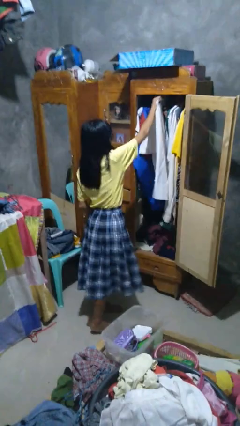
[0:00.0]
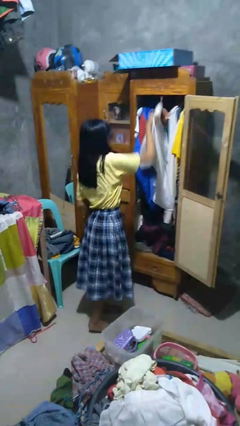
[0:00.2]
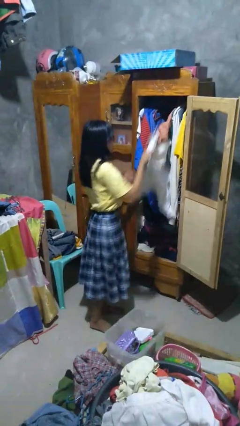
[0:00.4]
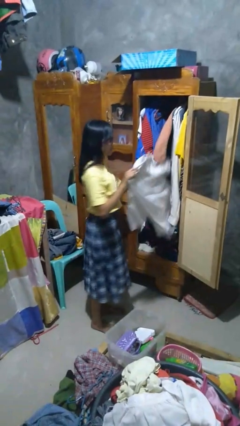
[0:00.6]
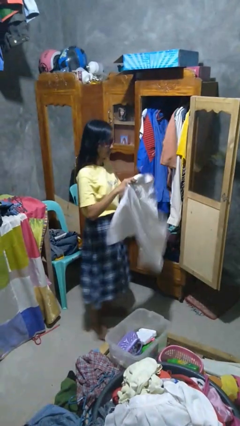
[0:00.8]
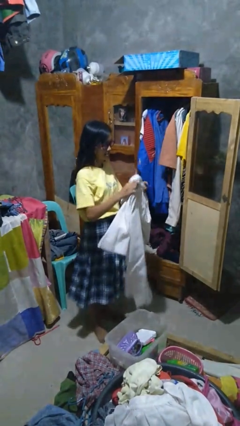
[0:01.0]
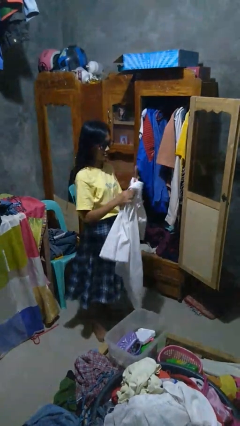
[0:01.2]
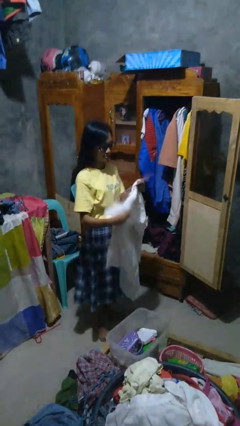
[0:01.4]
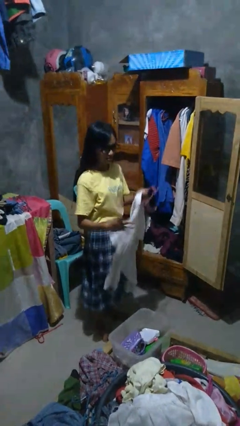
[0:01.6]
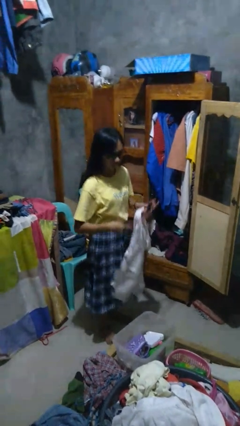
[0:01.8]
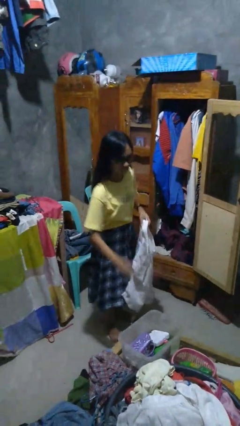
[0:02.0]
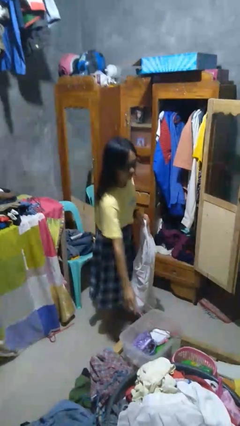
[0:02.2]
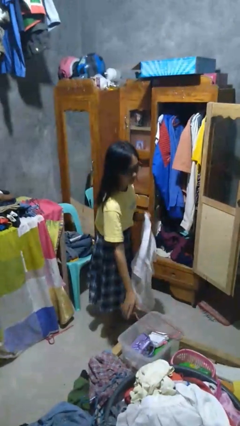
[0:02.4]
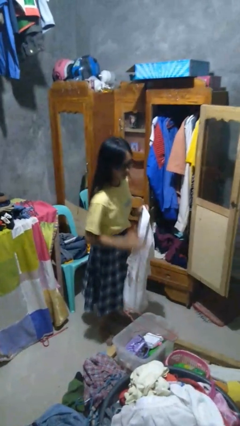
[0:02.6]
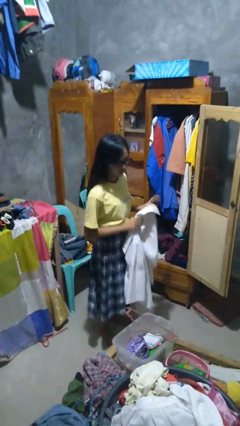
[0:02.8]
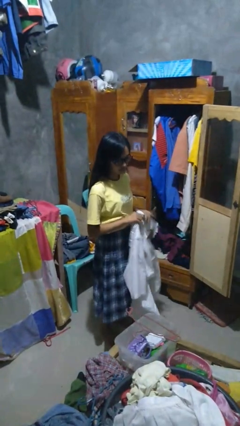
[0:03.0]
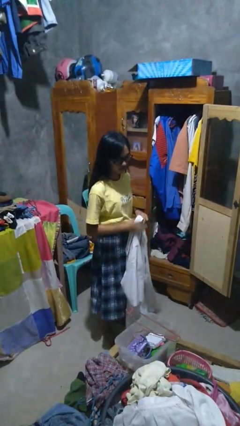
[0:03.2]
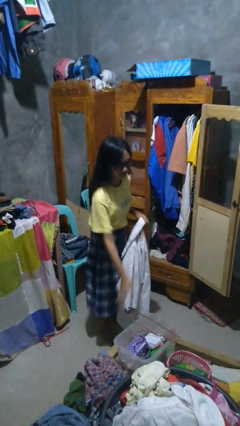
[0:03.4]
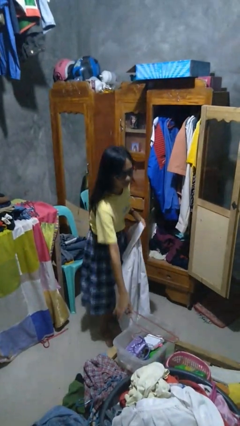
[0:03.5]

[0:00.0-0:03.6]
person takes clothes from closet

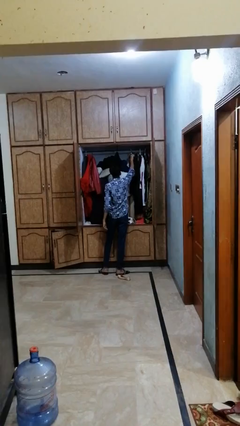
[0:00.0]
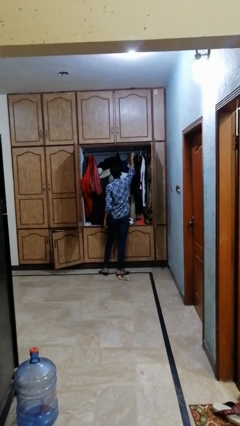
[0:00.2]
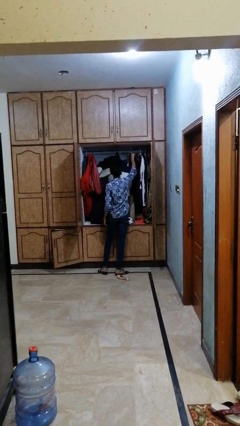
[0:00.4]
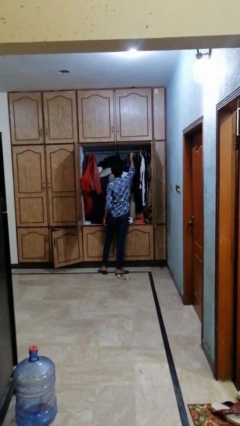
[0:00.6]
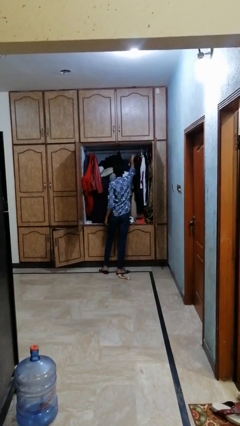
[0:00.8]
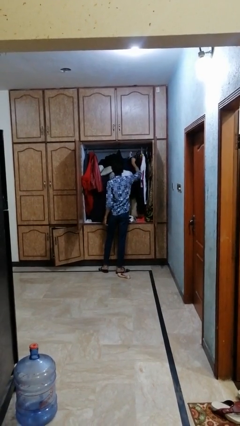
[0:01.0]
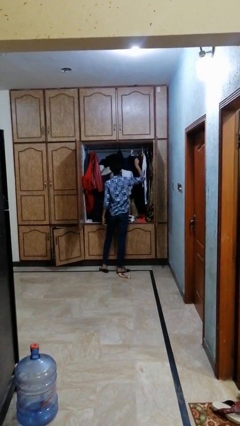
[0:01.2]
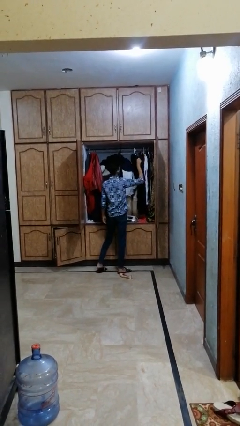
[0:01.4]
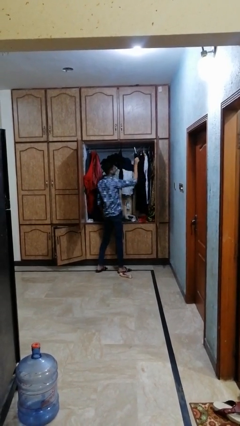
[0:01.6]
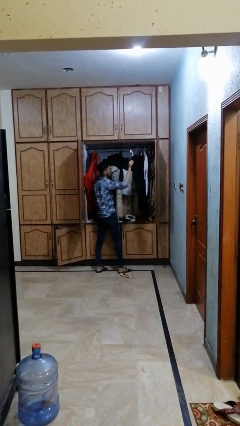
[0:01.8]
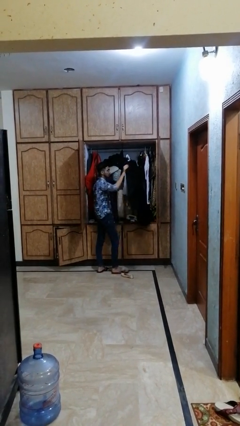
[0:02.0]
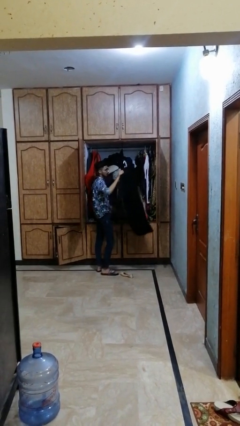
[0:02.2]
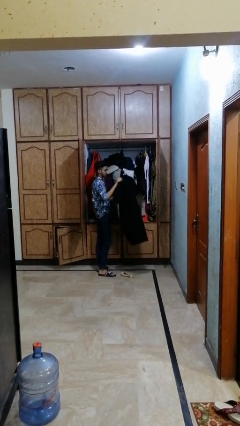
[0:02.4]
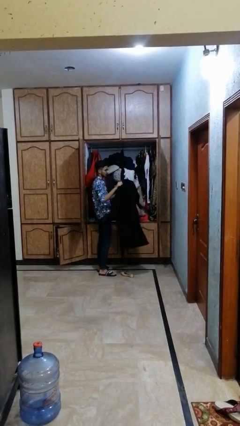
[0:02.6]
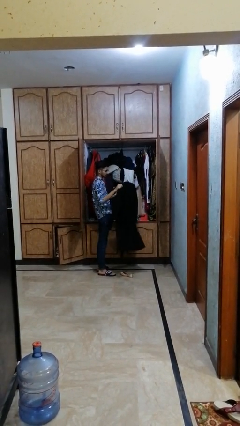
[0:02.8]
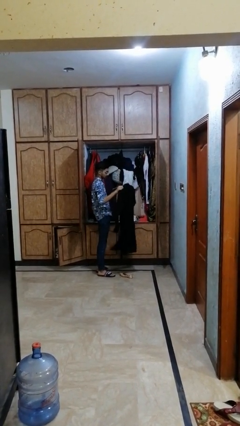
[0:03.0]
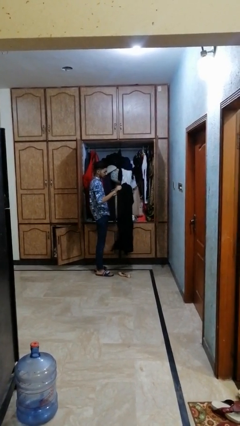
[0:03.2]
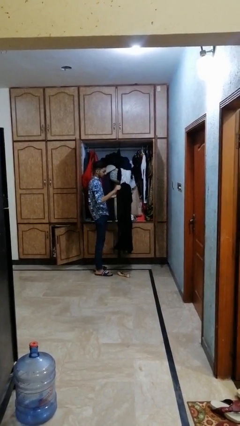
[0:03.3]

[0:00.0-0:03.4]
person takes clothes from dresser

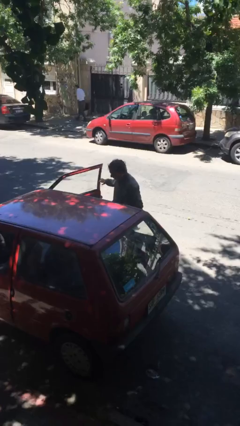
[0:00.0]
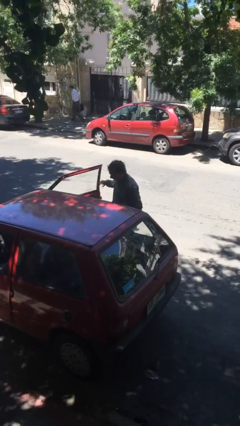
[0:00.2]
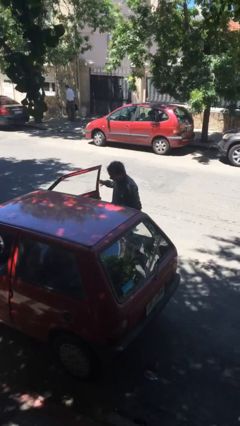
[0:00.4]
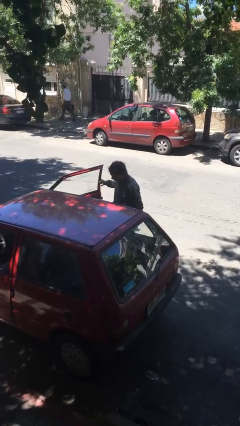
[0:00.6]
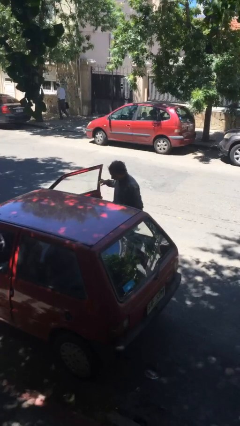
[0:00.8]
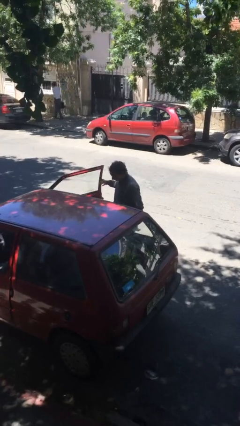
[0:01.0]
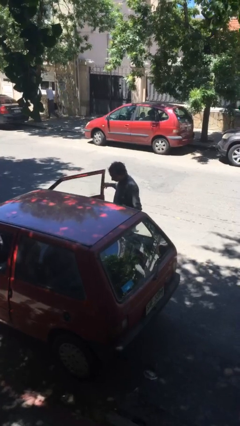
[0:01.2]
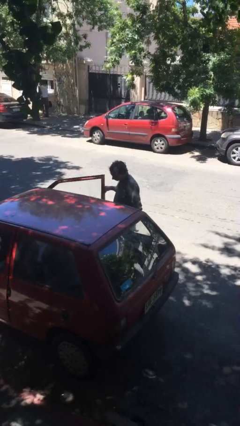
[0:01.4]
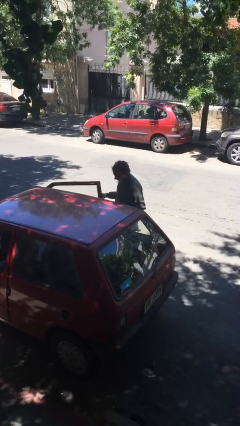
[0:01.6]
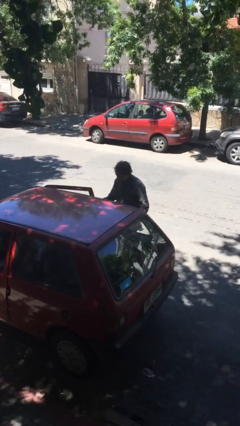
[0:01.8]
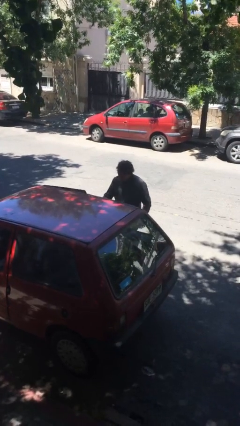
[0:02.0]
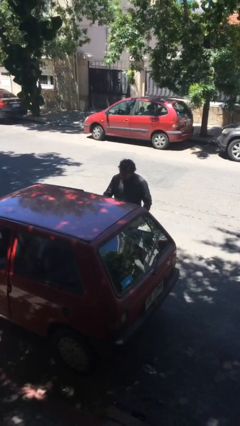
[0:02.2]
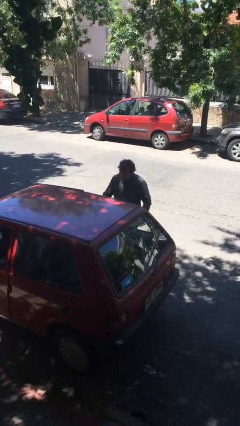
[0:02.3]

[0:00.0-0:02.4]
person closes car door

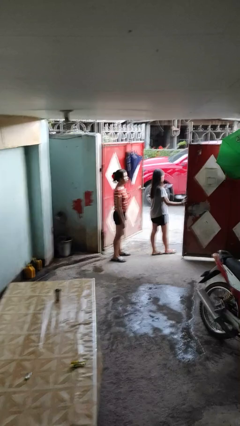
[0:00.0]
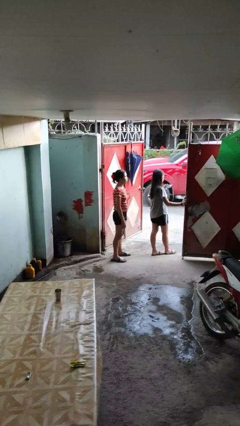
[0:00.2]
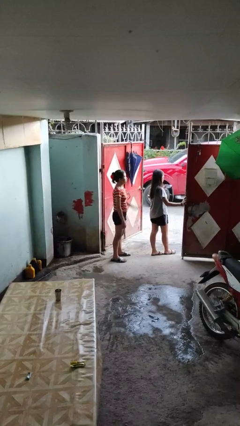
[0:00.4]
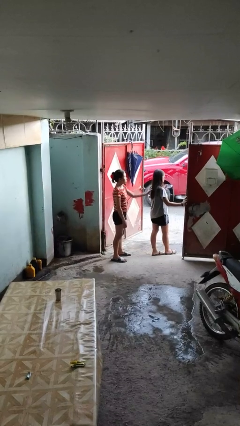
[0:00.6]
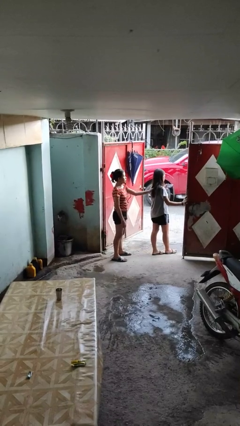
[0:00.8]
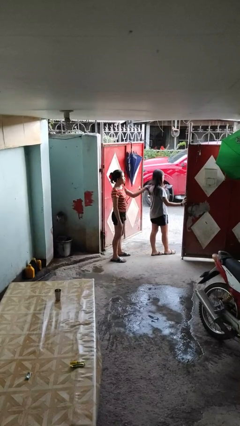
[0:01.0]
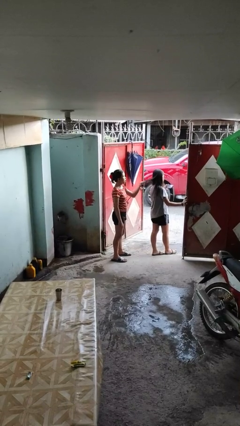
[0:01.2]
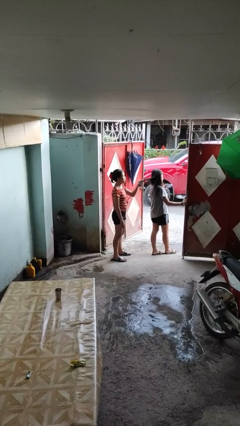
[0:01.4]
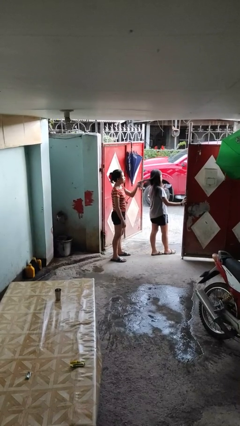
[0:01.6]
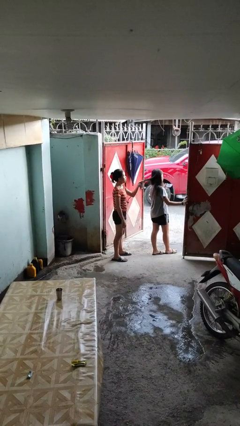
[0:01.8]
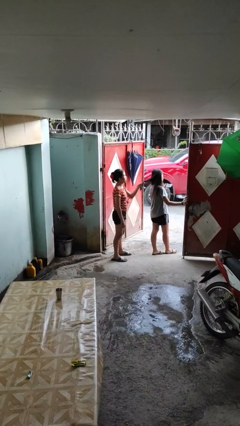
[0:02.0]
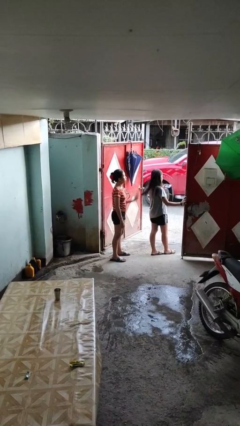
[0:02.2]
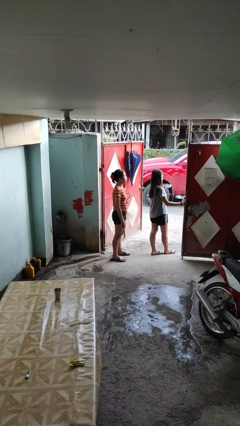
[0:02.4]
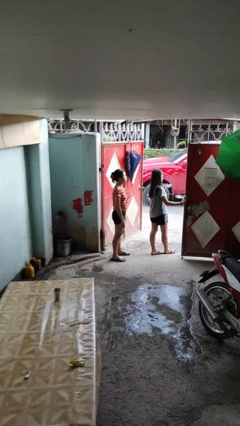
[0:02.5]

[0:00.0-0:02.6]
person grabs person by hair

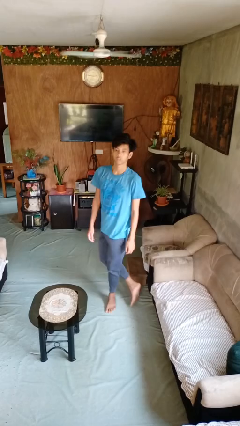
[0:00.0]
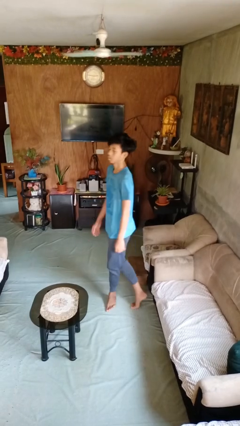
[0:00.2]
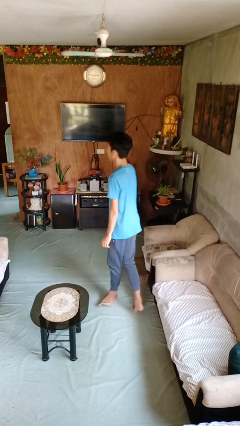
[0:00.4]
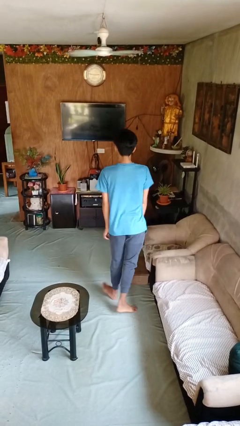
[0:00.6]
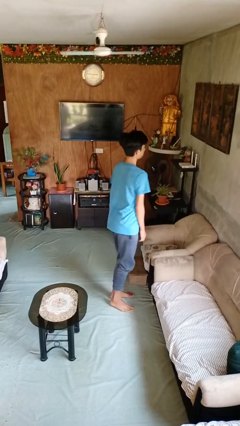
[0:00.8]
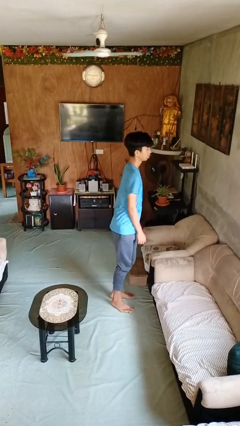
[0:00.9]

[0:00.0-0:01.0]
person twirls

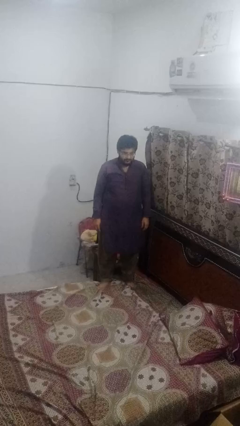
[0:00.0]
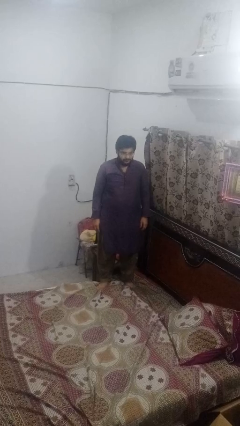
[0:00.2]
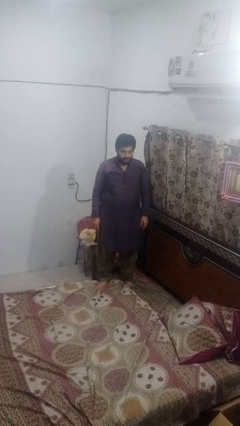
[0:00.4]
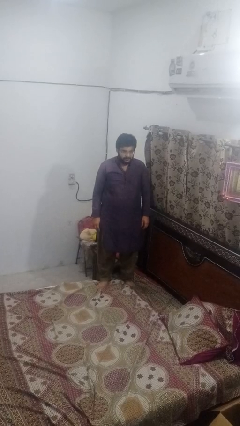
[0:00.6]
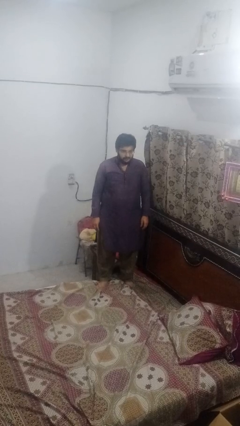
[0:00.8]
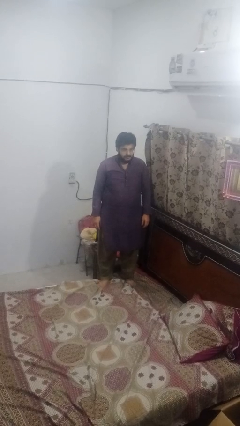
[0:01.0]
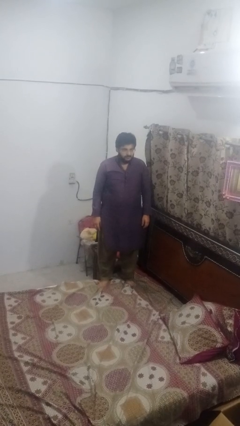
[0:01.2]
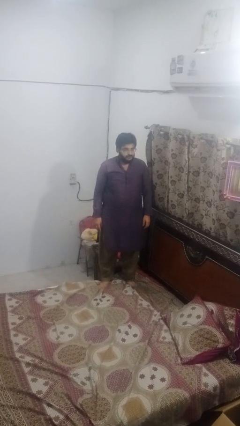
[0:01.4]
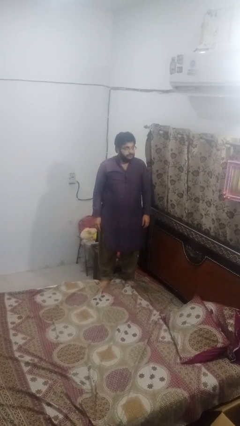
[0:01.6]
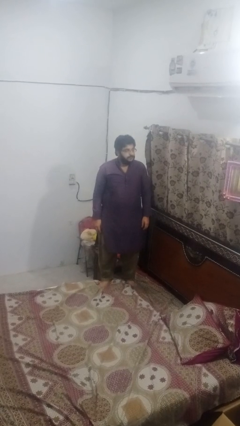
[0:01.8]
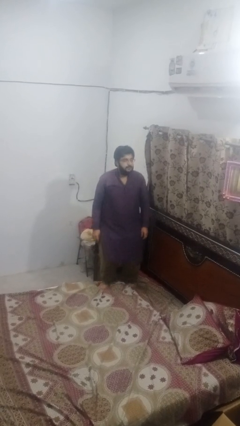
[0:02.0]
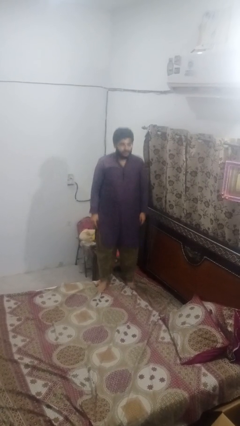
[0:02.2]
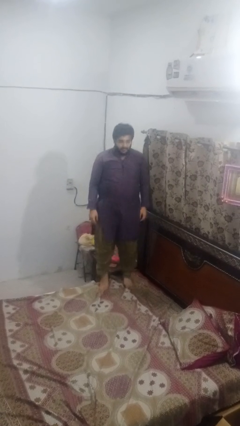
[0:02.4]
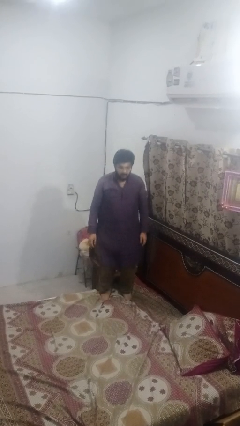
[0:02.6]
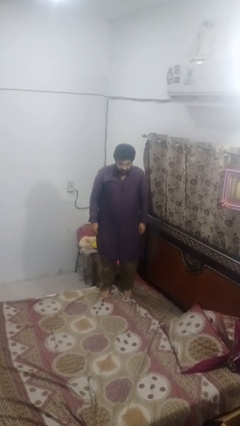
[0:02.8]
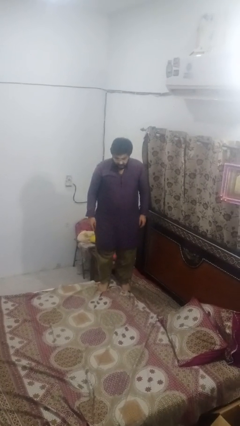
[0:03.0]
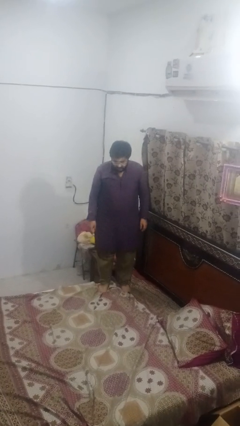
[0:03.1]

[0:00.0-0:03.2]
person jumps on bed

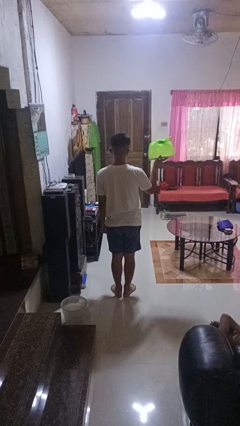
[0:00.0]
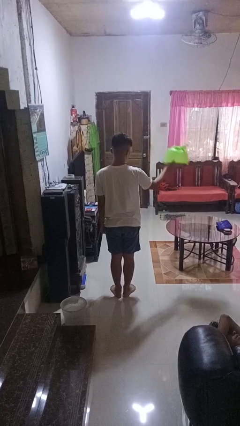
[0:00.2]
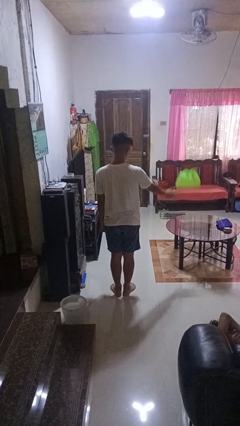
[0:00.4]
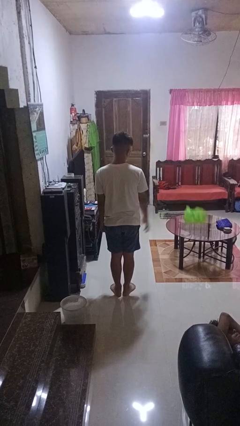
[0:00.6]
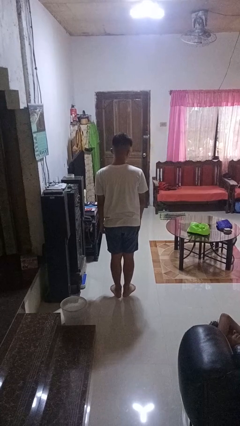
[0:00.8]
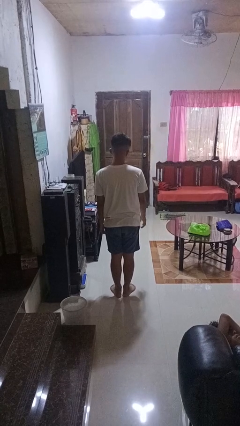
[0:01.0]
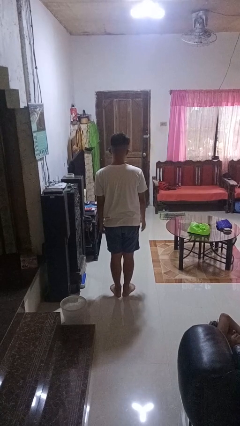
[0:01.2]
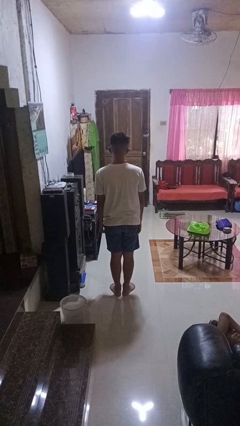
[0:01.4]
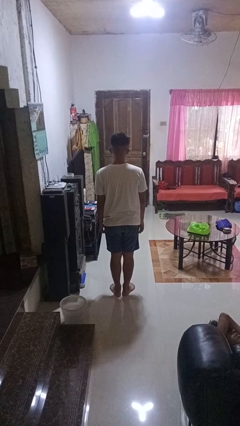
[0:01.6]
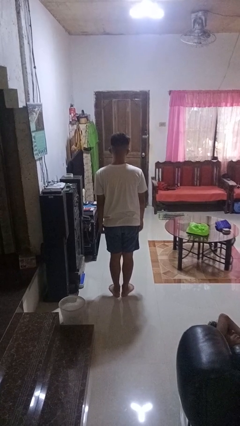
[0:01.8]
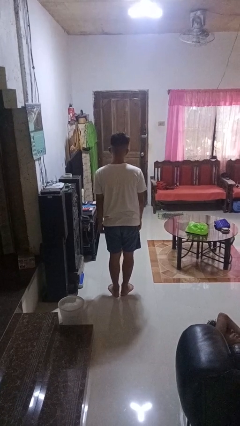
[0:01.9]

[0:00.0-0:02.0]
person throws object on table
